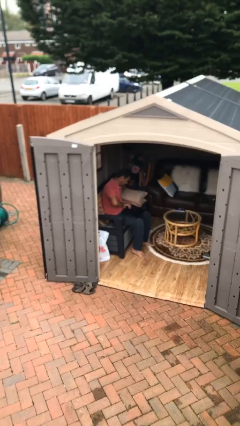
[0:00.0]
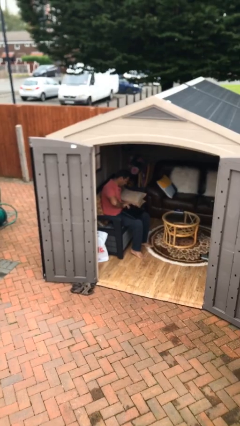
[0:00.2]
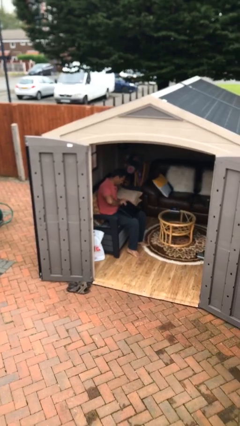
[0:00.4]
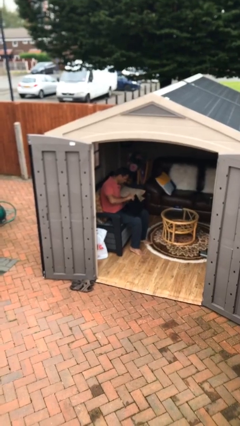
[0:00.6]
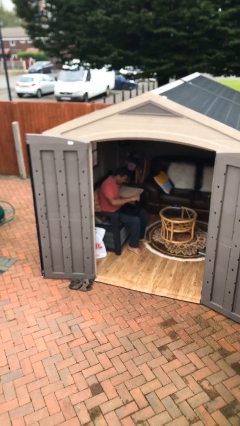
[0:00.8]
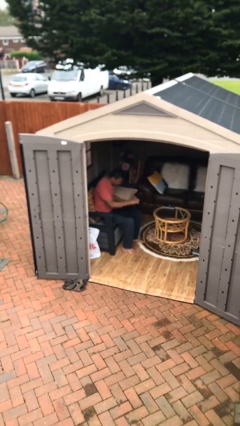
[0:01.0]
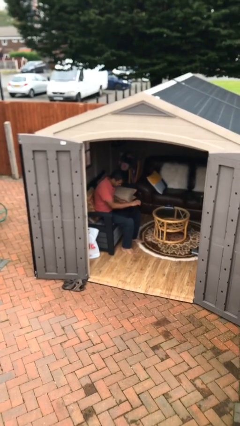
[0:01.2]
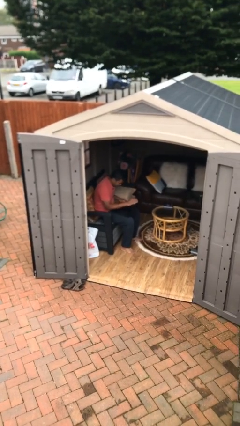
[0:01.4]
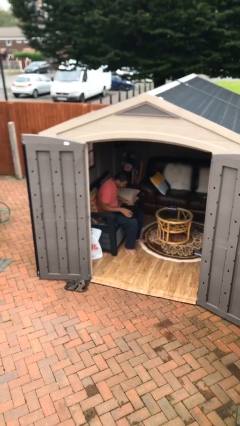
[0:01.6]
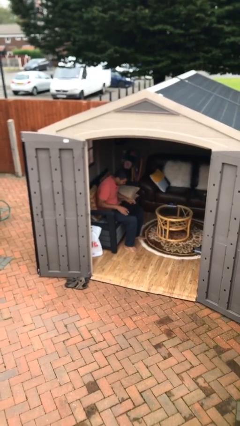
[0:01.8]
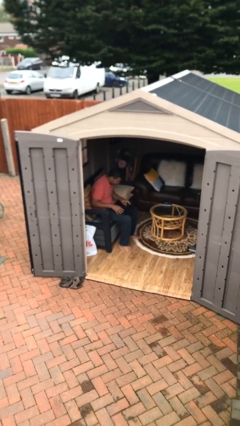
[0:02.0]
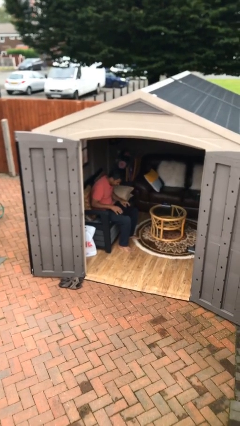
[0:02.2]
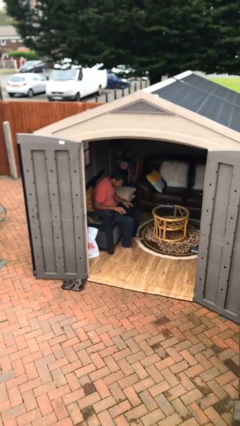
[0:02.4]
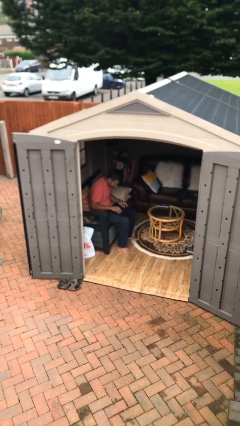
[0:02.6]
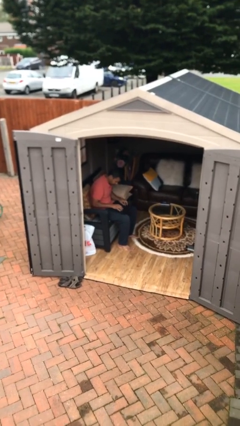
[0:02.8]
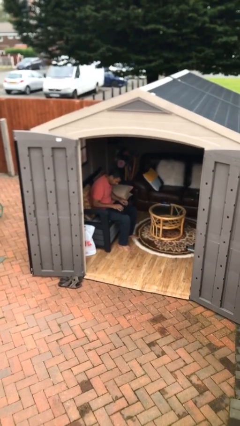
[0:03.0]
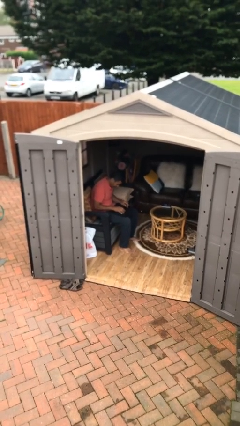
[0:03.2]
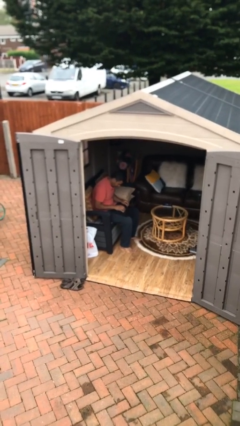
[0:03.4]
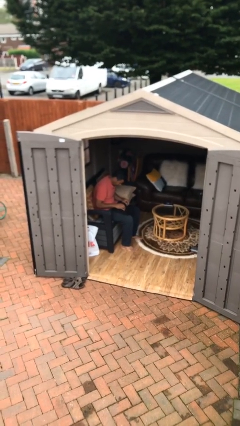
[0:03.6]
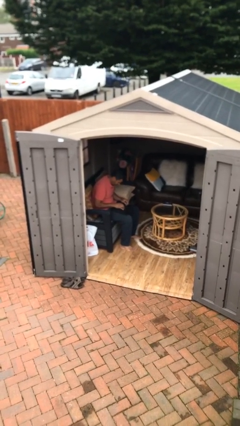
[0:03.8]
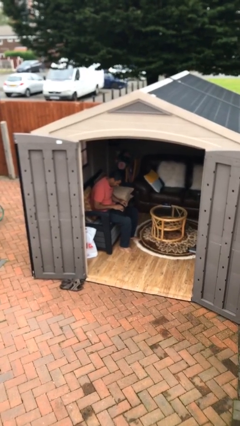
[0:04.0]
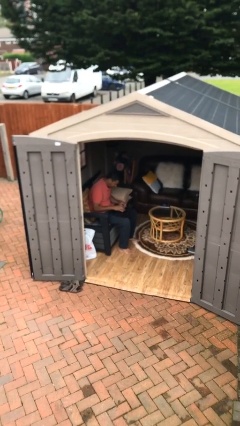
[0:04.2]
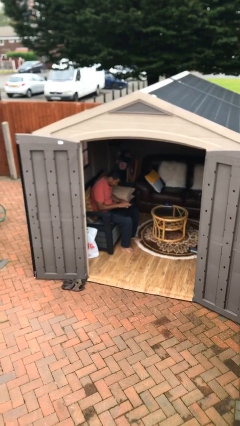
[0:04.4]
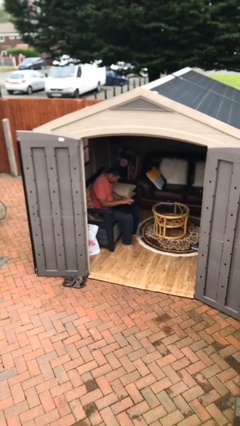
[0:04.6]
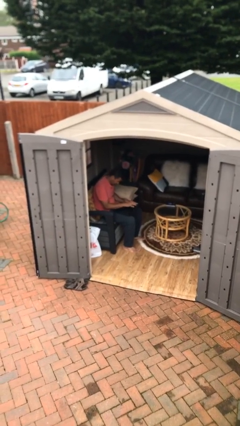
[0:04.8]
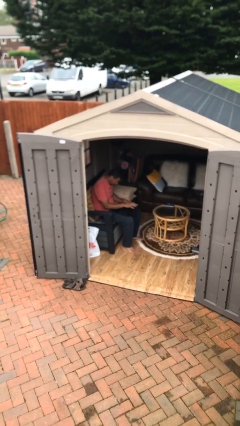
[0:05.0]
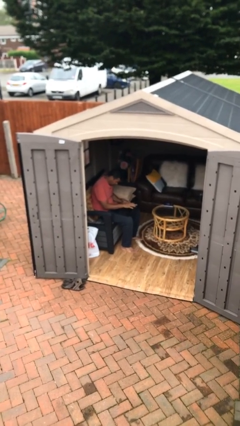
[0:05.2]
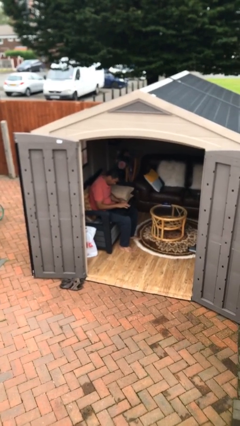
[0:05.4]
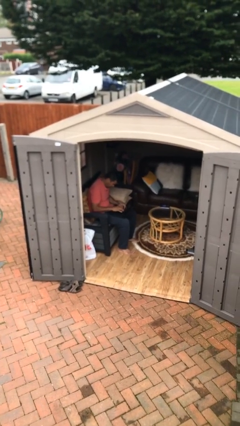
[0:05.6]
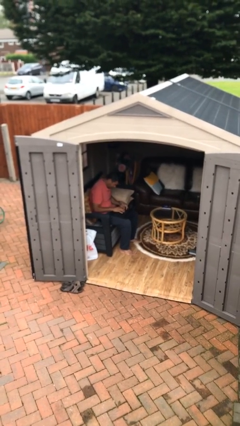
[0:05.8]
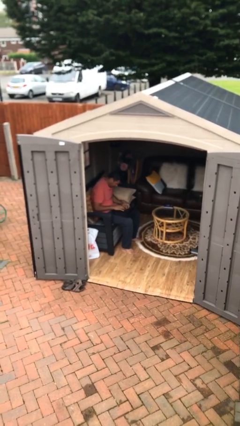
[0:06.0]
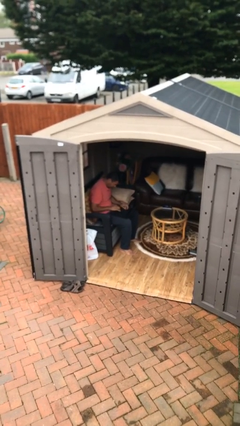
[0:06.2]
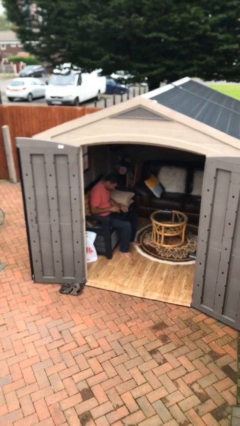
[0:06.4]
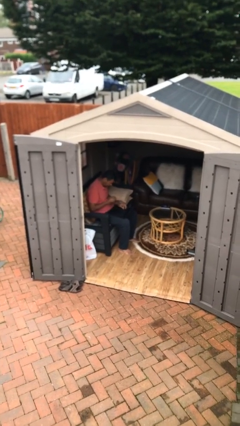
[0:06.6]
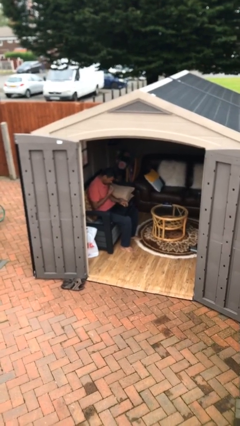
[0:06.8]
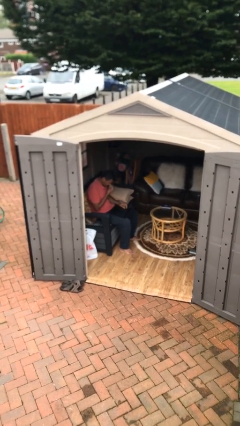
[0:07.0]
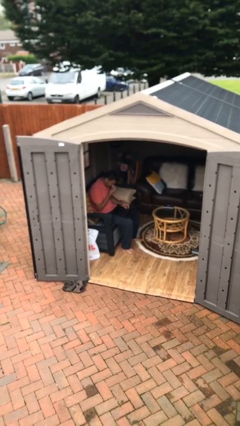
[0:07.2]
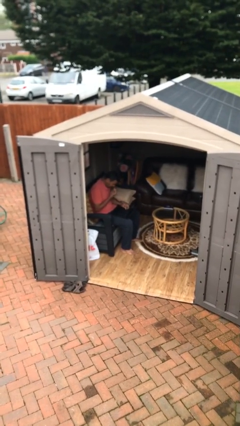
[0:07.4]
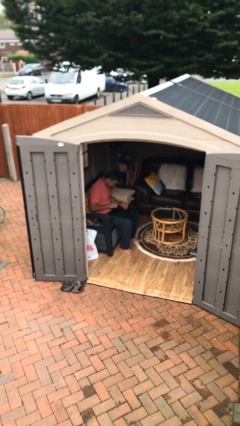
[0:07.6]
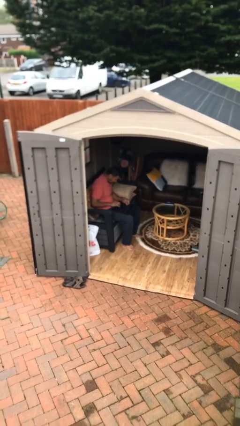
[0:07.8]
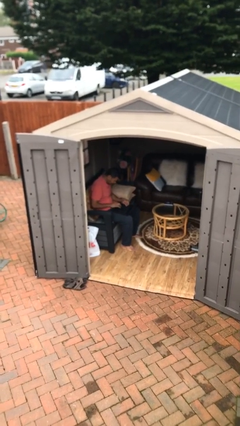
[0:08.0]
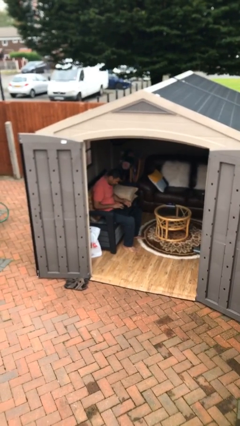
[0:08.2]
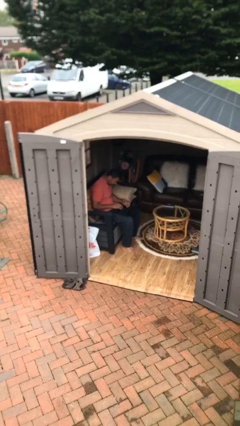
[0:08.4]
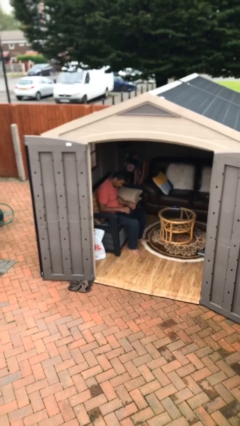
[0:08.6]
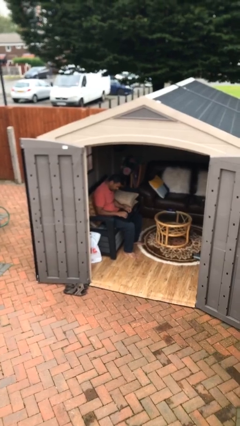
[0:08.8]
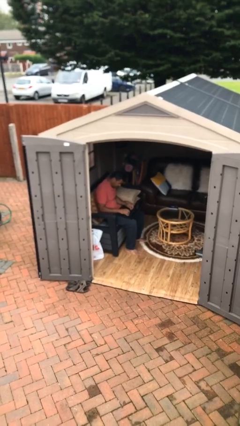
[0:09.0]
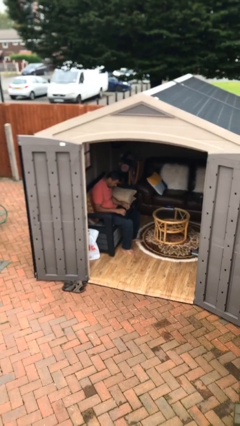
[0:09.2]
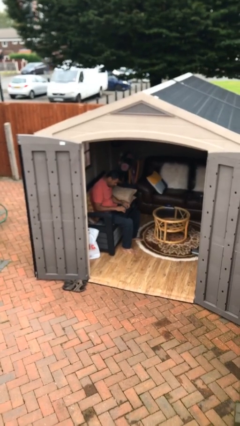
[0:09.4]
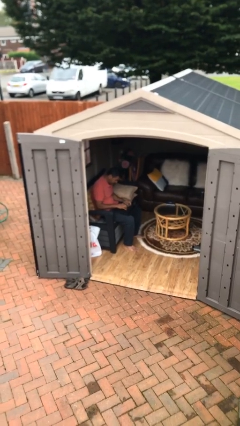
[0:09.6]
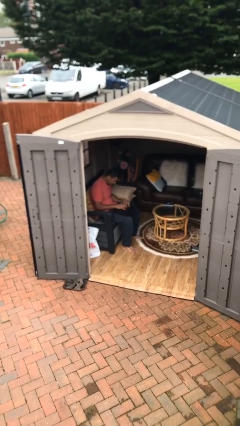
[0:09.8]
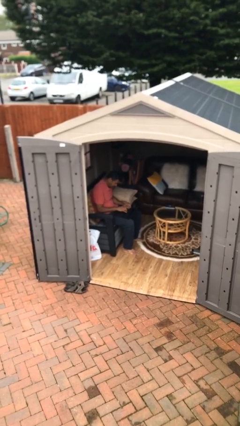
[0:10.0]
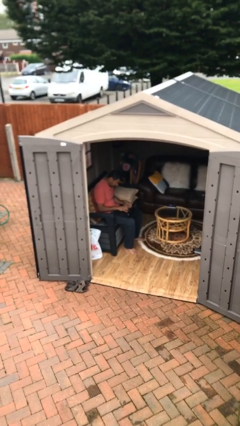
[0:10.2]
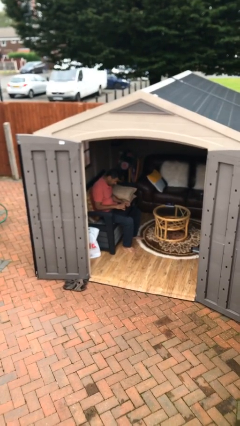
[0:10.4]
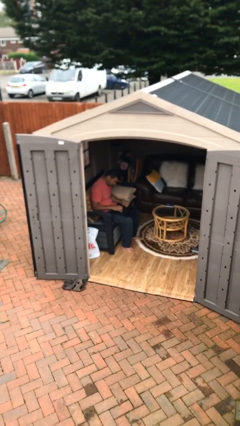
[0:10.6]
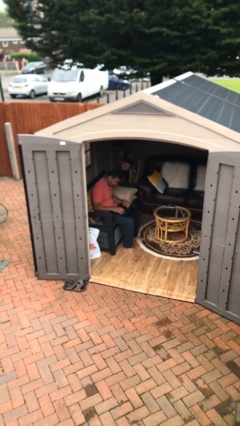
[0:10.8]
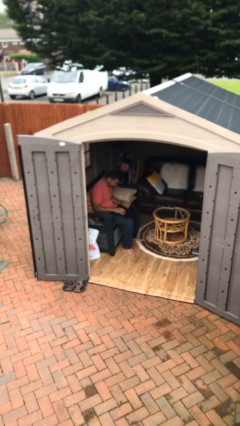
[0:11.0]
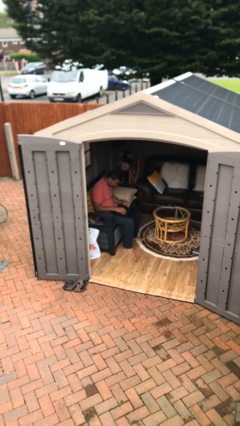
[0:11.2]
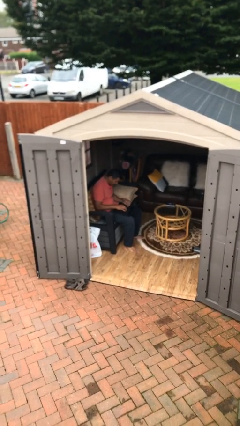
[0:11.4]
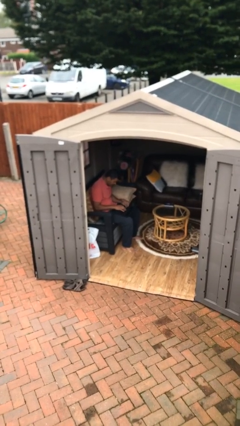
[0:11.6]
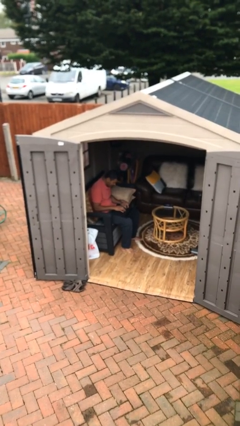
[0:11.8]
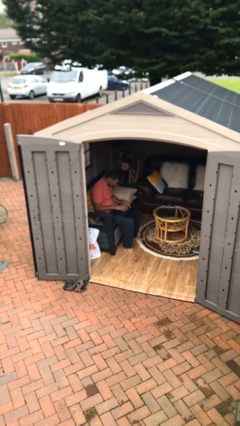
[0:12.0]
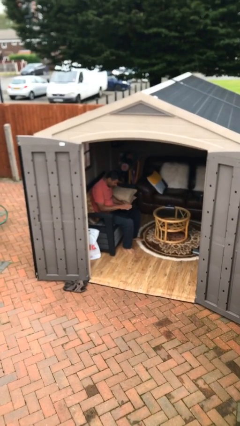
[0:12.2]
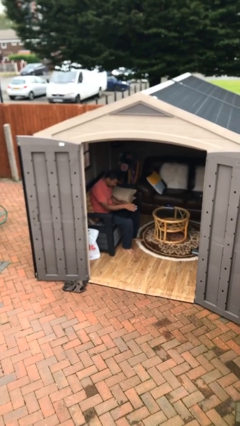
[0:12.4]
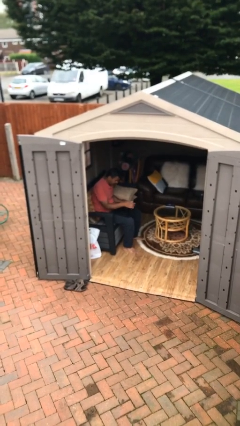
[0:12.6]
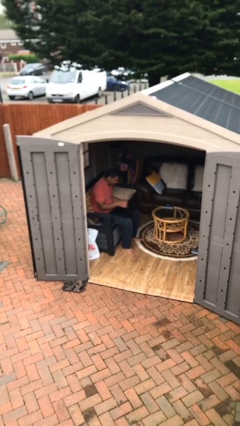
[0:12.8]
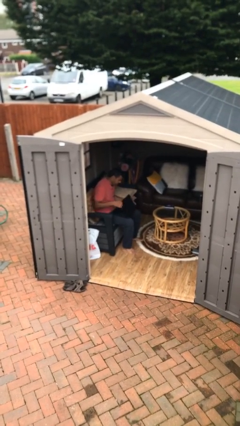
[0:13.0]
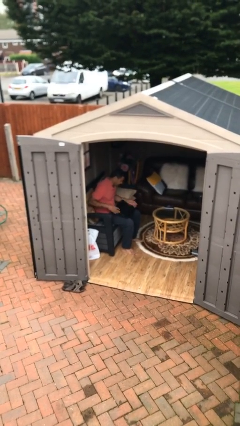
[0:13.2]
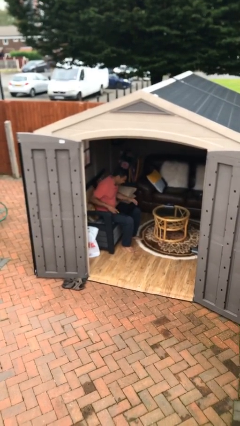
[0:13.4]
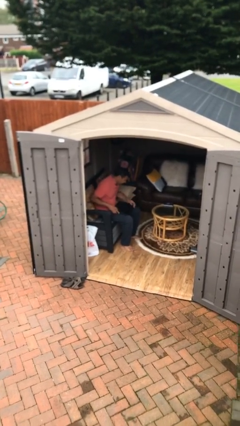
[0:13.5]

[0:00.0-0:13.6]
person interacts with laptop

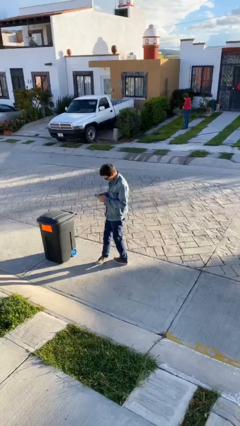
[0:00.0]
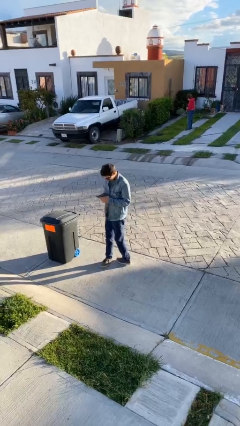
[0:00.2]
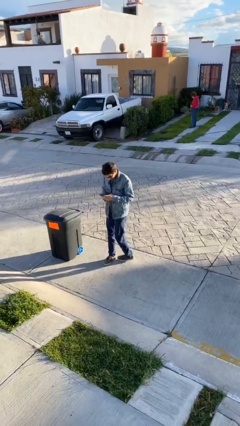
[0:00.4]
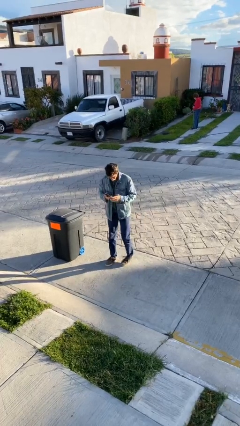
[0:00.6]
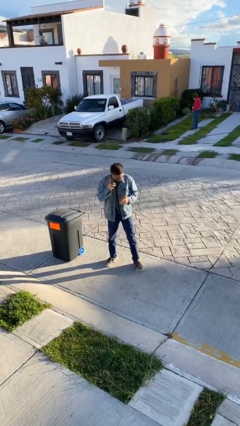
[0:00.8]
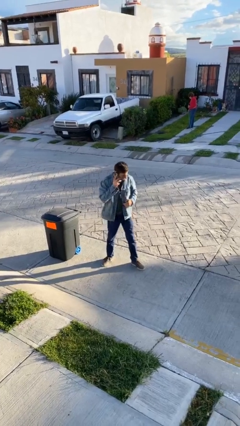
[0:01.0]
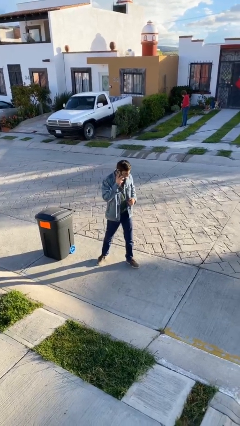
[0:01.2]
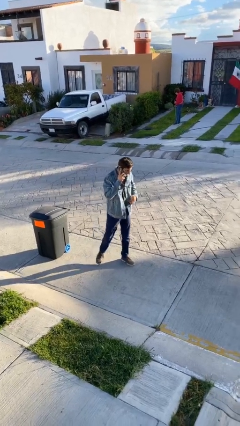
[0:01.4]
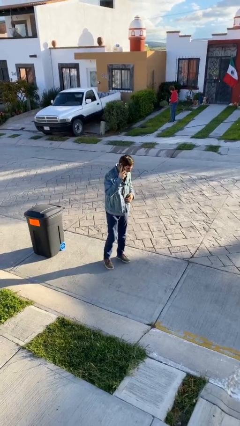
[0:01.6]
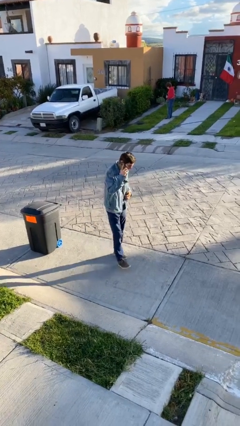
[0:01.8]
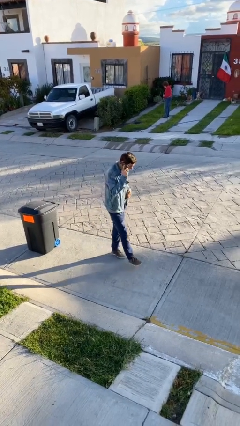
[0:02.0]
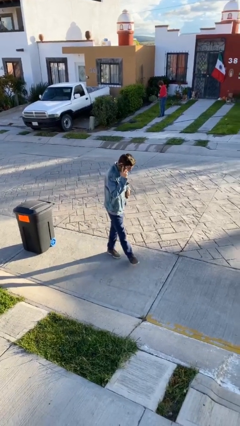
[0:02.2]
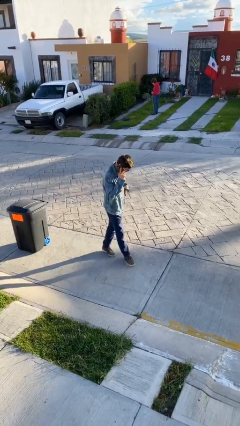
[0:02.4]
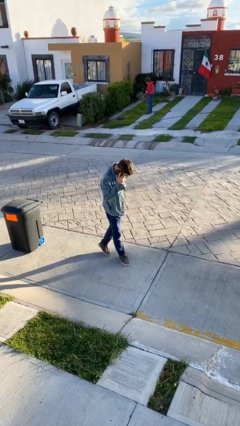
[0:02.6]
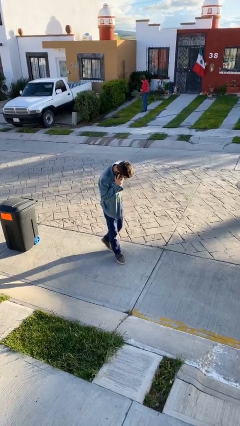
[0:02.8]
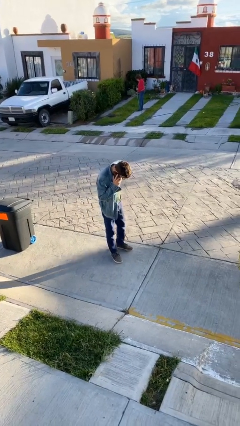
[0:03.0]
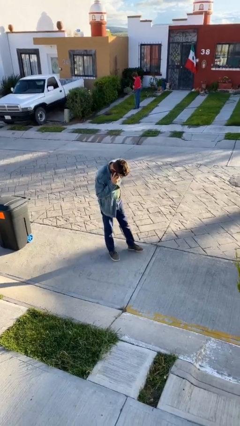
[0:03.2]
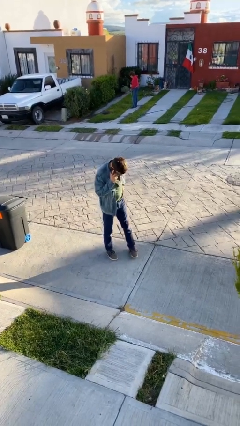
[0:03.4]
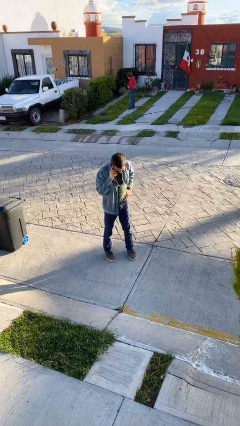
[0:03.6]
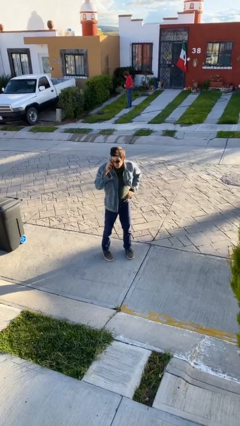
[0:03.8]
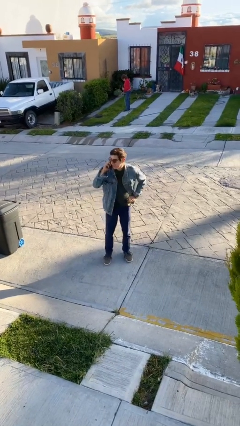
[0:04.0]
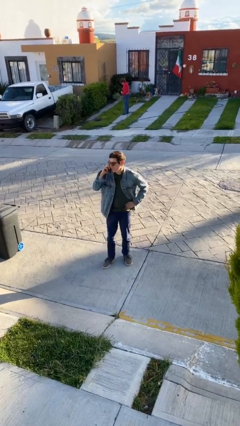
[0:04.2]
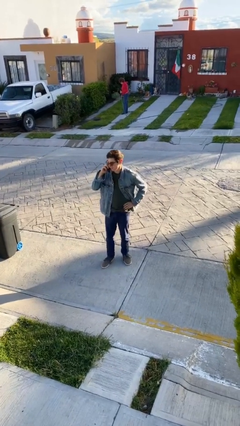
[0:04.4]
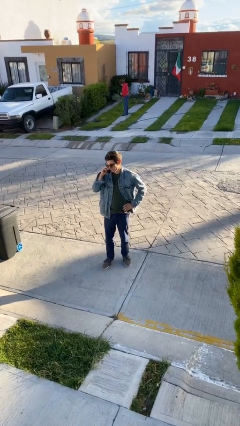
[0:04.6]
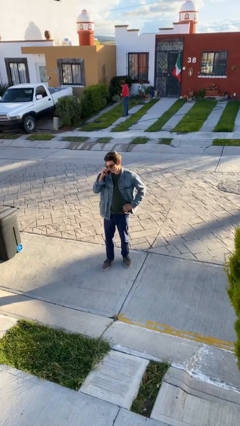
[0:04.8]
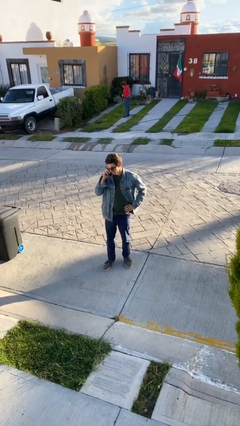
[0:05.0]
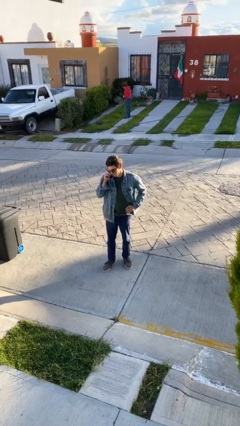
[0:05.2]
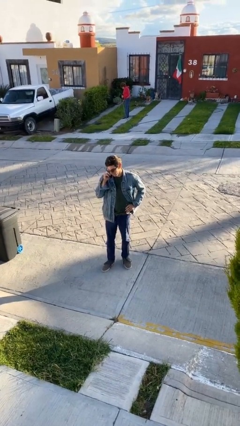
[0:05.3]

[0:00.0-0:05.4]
person talks on phone
